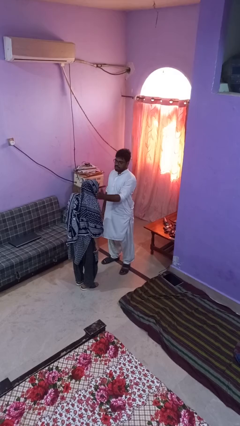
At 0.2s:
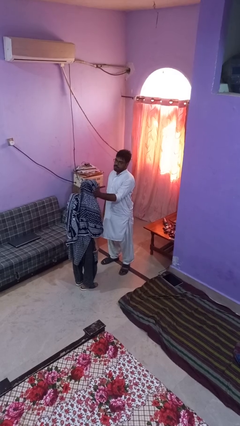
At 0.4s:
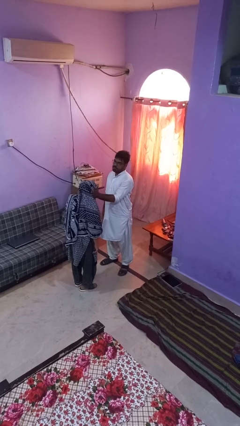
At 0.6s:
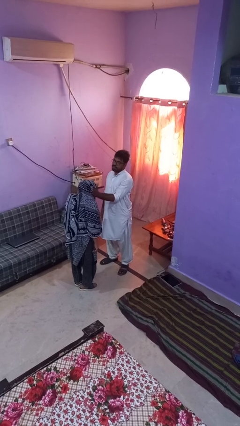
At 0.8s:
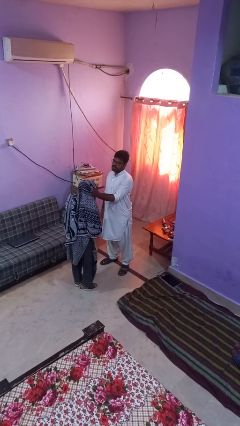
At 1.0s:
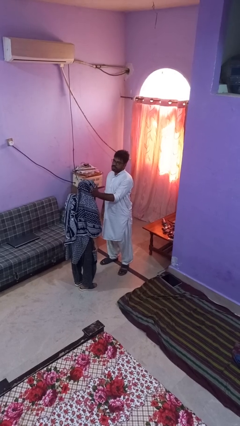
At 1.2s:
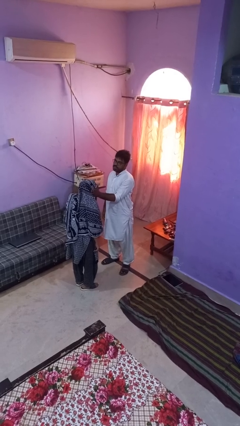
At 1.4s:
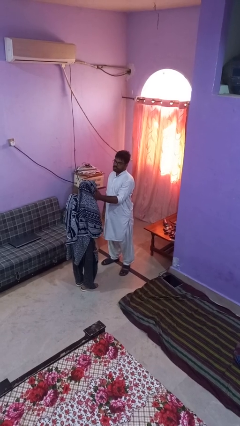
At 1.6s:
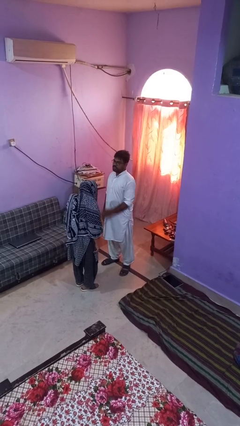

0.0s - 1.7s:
person touches face of person

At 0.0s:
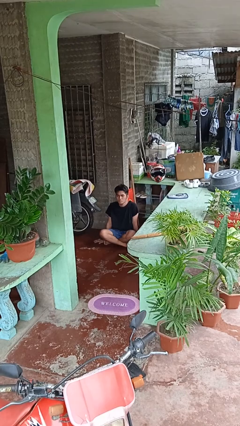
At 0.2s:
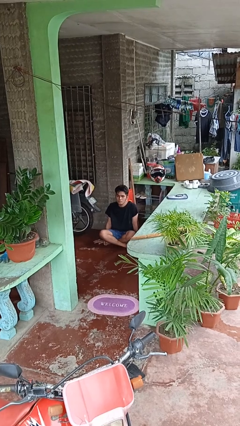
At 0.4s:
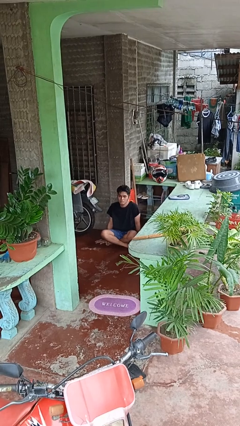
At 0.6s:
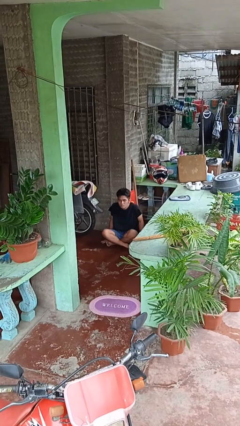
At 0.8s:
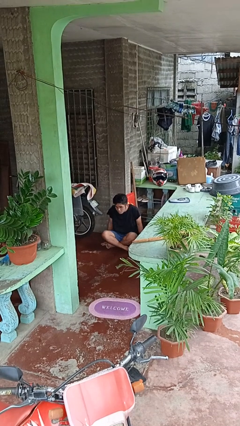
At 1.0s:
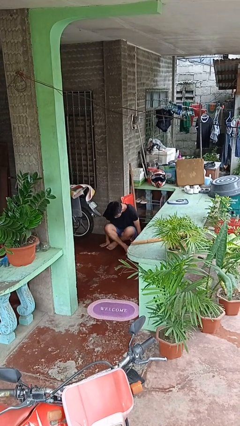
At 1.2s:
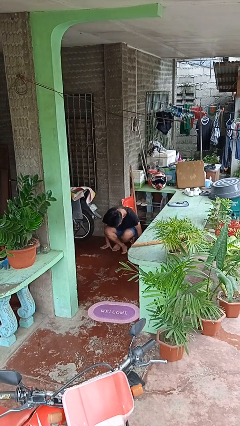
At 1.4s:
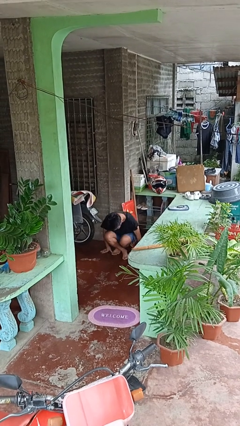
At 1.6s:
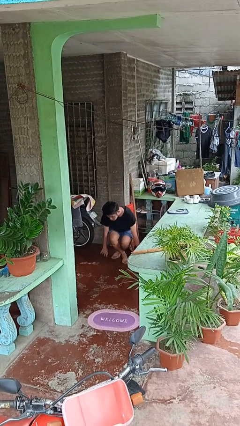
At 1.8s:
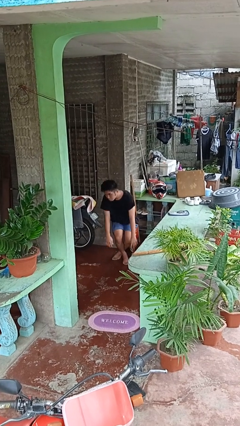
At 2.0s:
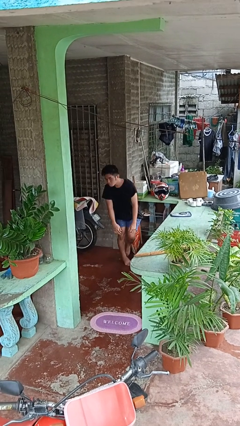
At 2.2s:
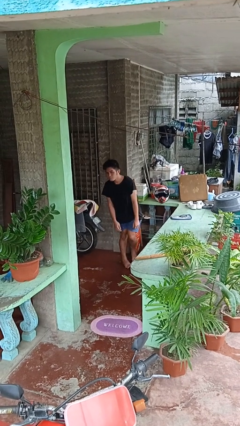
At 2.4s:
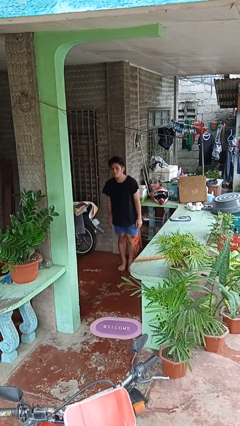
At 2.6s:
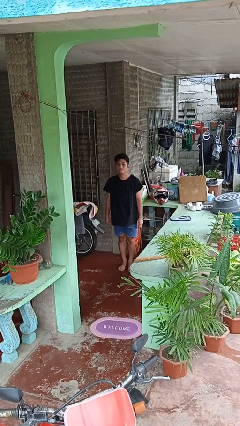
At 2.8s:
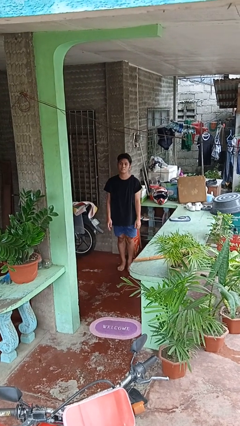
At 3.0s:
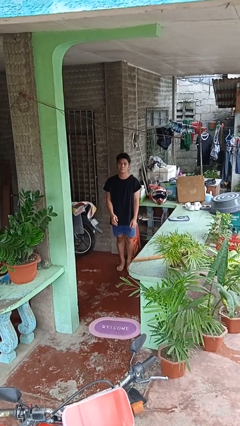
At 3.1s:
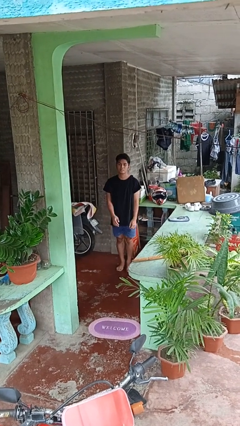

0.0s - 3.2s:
person stands up from floor

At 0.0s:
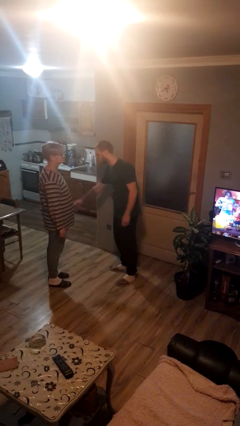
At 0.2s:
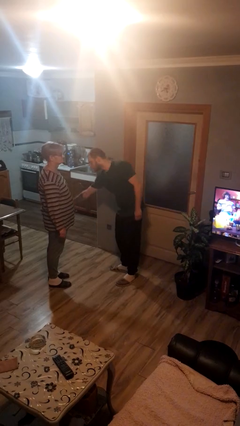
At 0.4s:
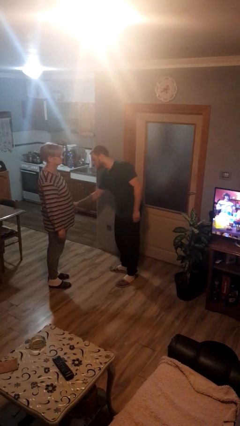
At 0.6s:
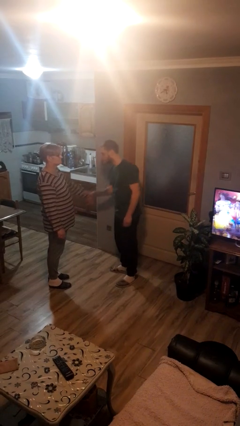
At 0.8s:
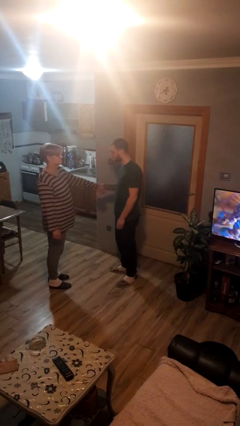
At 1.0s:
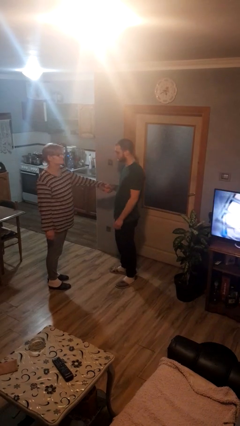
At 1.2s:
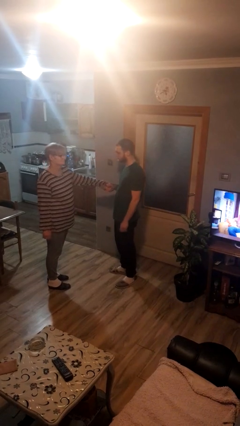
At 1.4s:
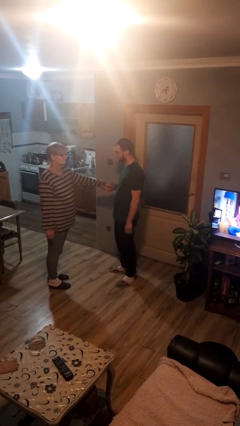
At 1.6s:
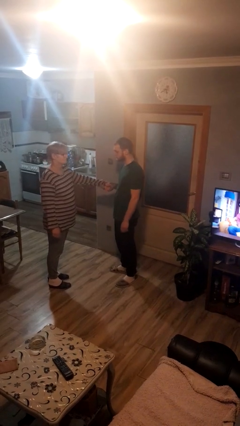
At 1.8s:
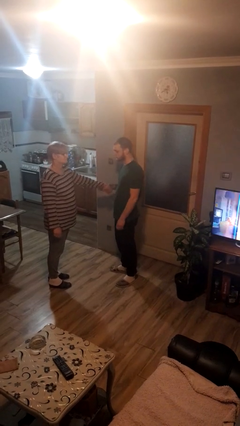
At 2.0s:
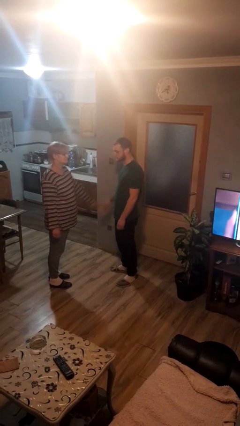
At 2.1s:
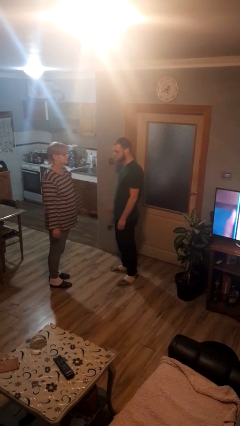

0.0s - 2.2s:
person grabs person by forearm

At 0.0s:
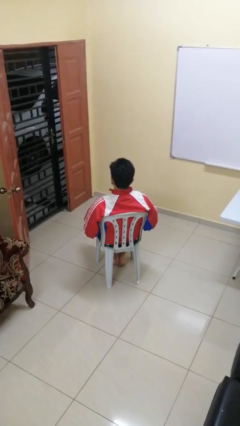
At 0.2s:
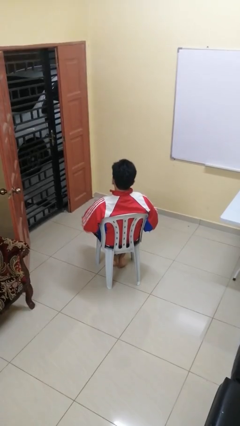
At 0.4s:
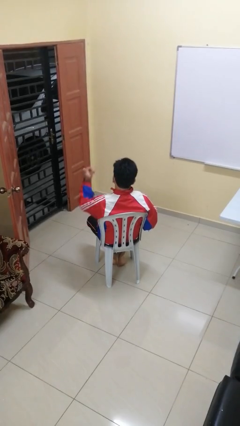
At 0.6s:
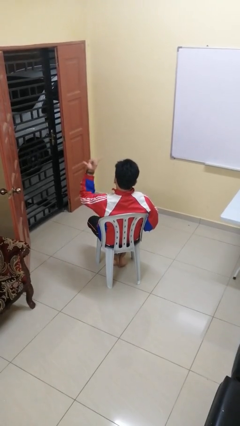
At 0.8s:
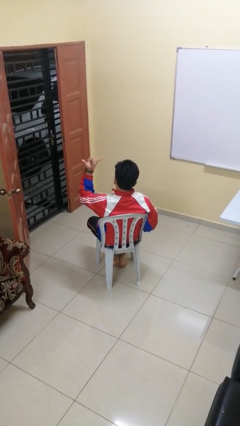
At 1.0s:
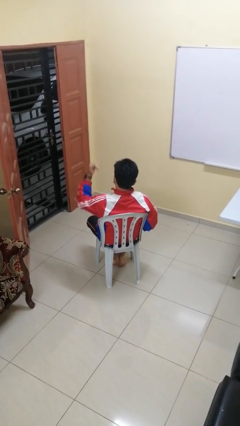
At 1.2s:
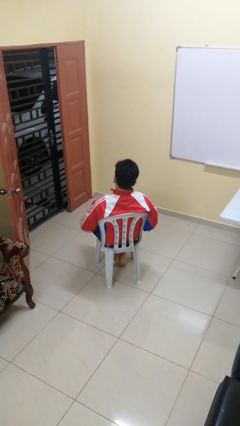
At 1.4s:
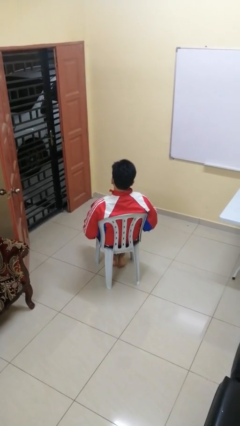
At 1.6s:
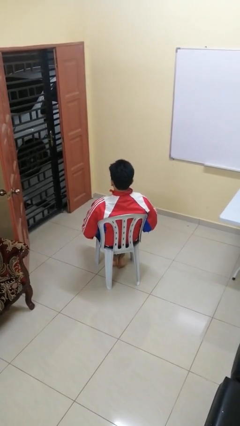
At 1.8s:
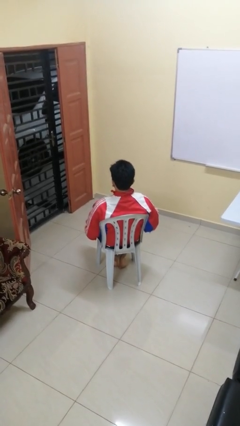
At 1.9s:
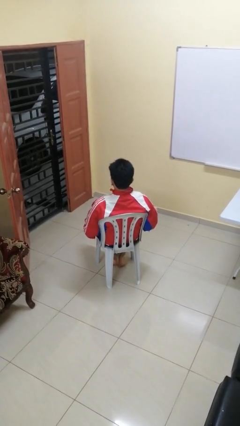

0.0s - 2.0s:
person gestures hang loose

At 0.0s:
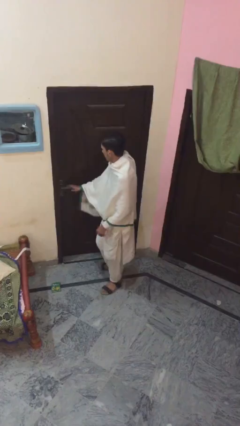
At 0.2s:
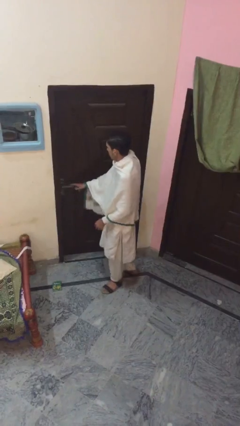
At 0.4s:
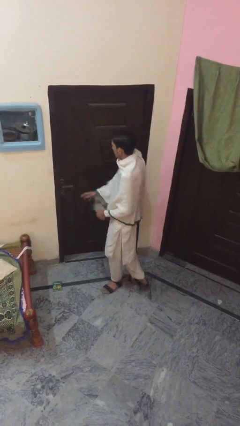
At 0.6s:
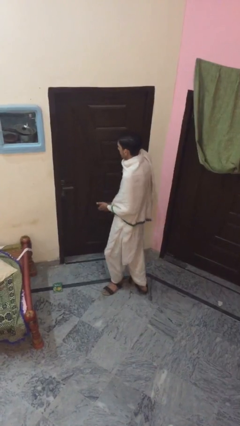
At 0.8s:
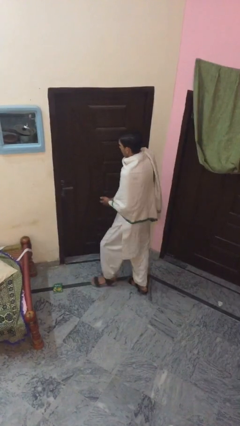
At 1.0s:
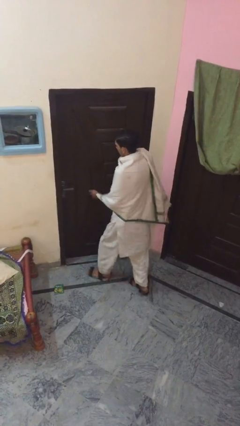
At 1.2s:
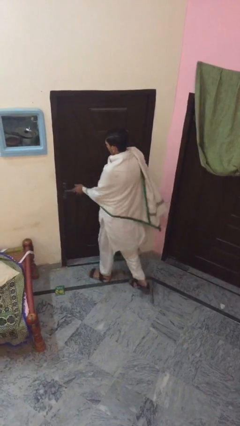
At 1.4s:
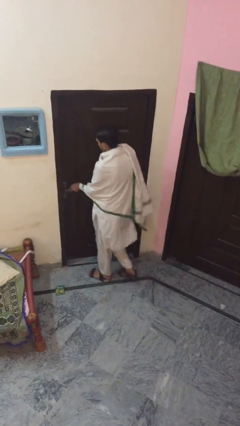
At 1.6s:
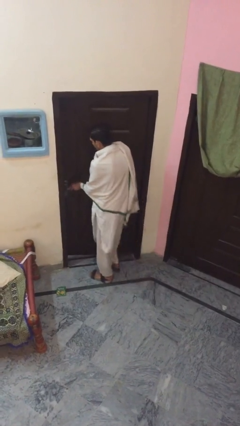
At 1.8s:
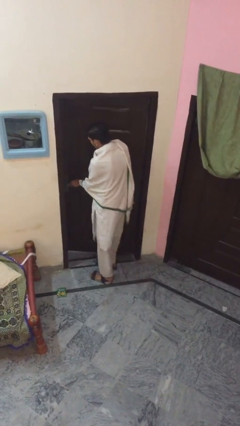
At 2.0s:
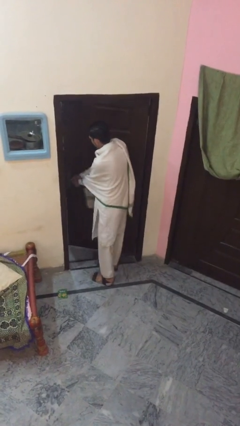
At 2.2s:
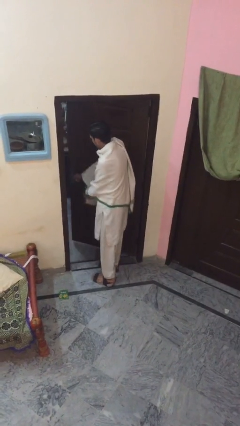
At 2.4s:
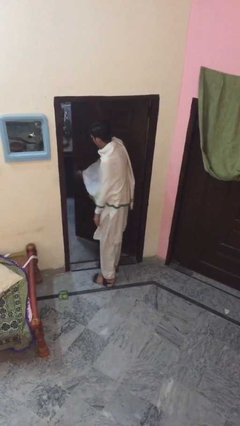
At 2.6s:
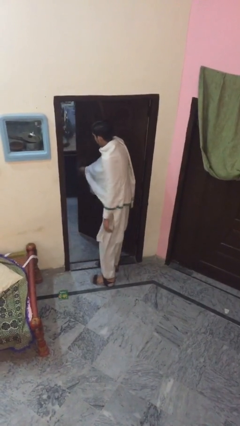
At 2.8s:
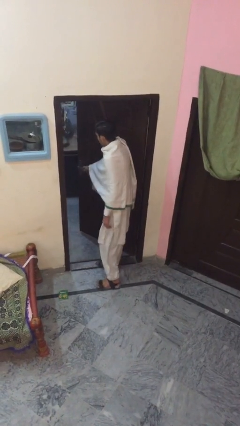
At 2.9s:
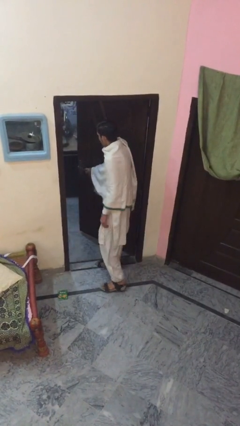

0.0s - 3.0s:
person opens facility door

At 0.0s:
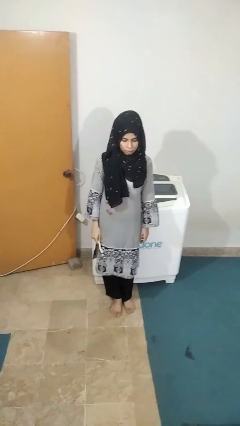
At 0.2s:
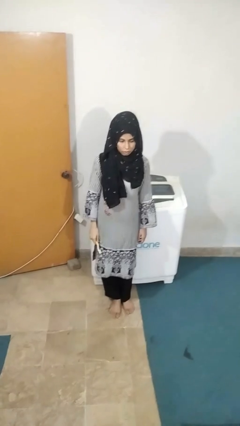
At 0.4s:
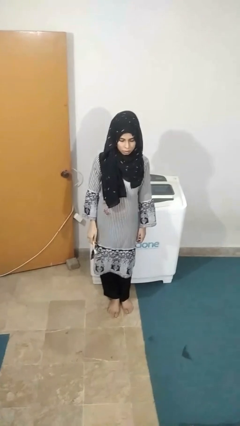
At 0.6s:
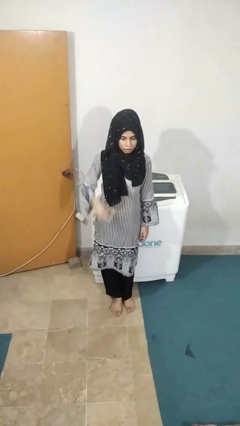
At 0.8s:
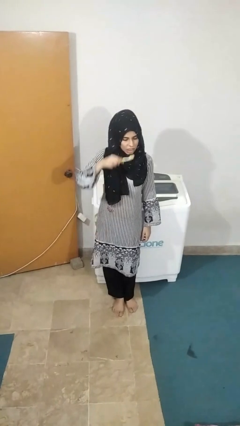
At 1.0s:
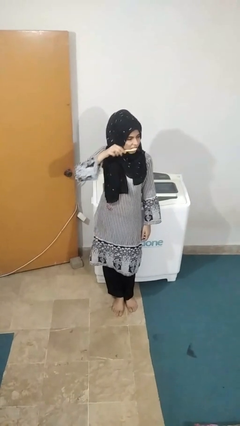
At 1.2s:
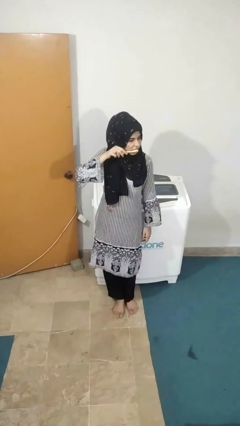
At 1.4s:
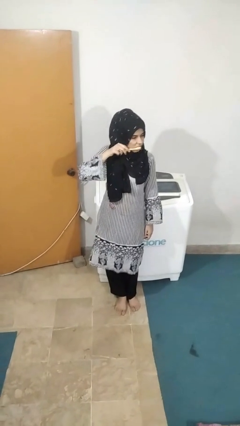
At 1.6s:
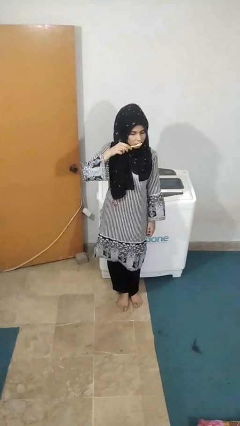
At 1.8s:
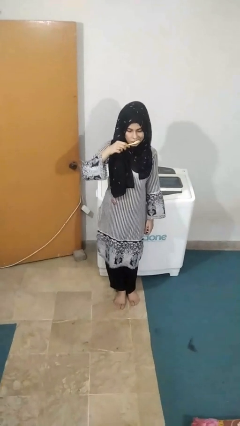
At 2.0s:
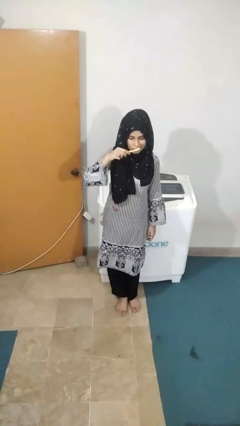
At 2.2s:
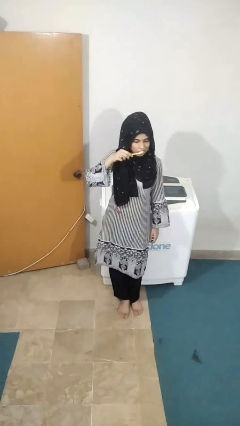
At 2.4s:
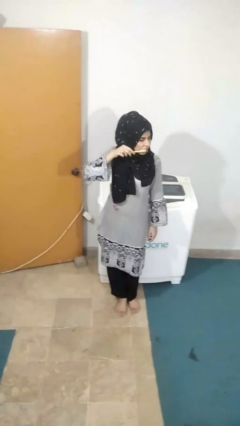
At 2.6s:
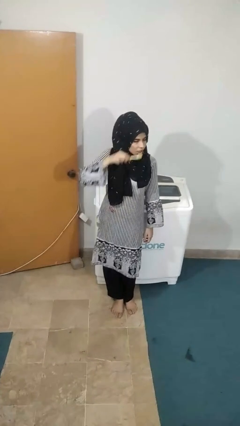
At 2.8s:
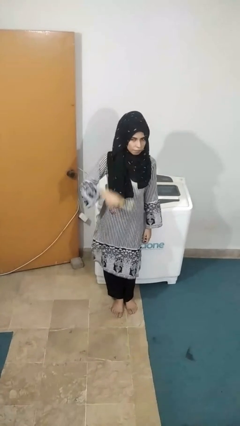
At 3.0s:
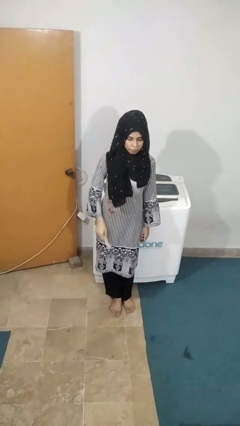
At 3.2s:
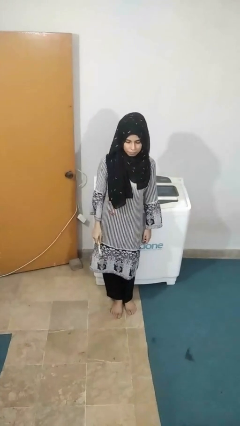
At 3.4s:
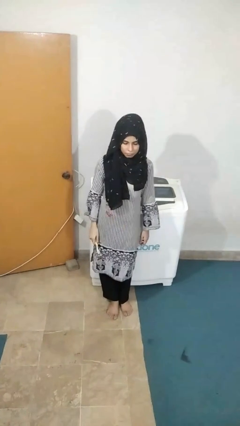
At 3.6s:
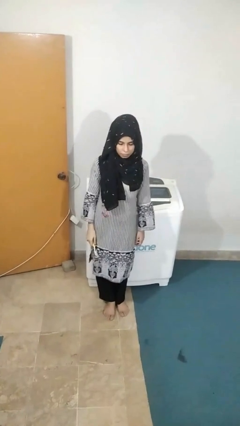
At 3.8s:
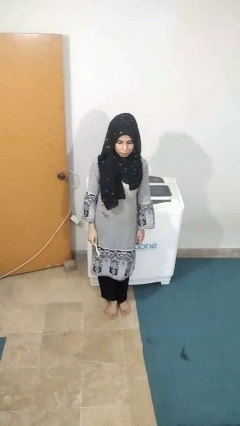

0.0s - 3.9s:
person brushes teeth

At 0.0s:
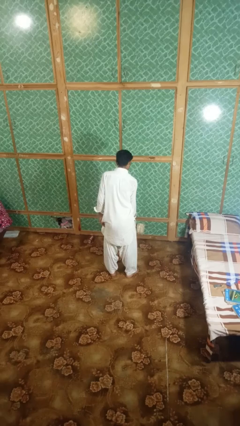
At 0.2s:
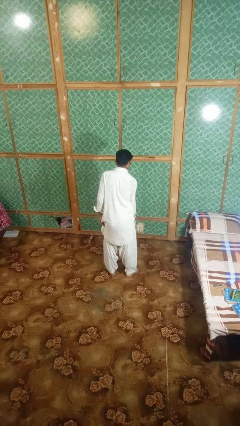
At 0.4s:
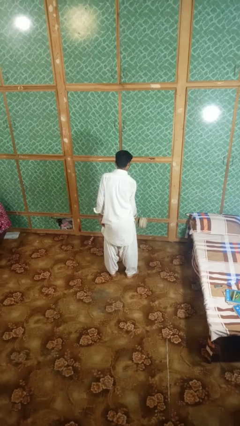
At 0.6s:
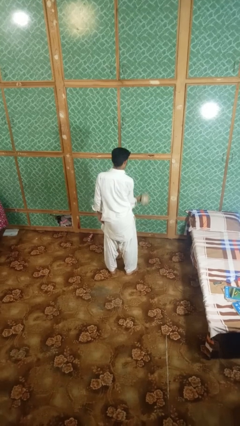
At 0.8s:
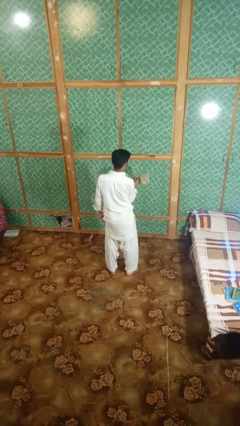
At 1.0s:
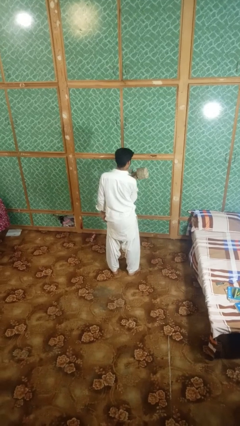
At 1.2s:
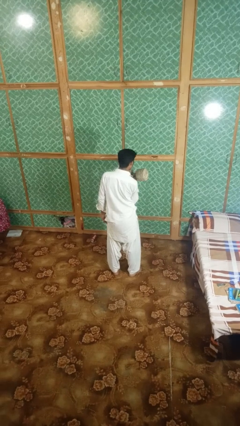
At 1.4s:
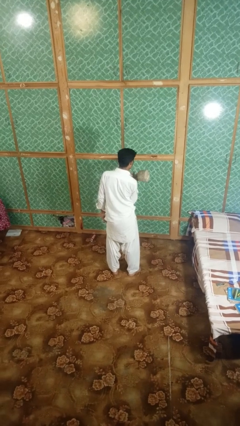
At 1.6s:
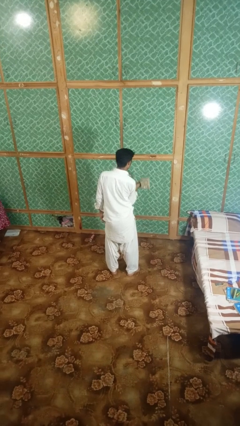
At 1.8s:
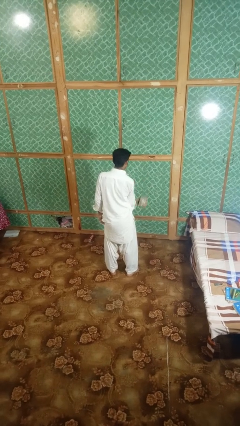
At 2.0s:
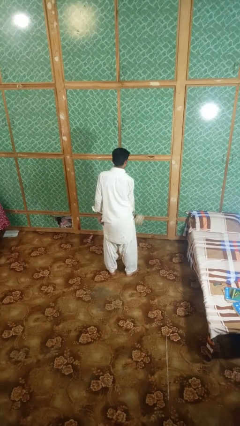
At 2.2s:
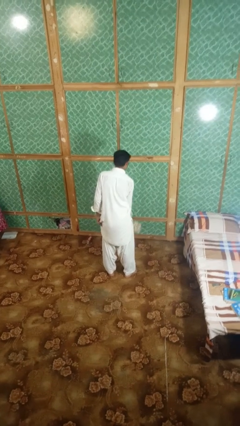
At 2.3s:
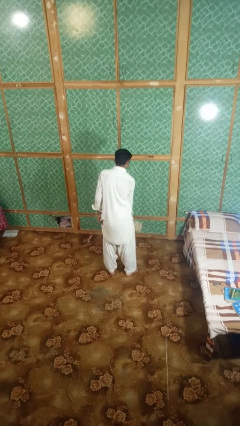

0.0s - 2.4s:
person lifts dumbbells
